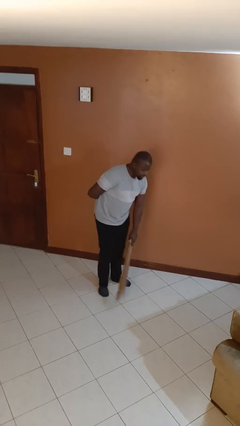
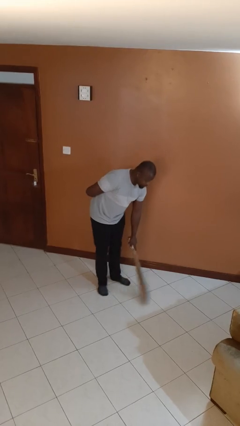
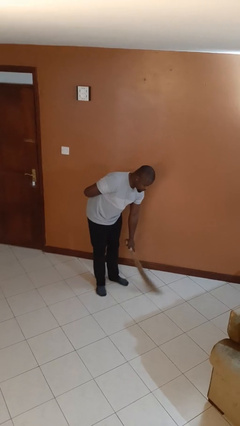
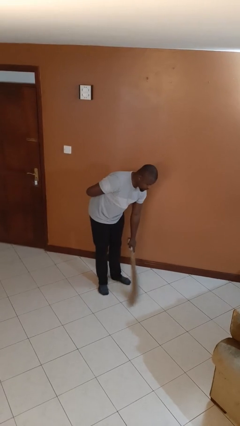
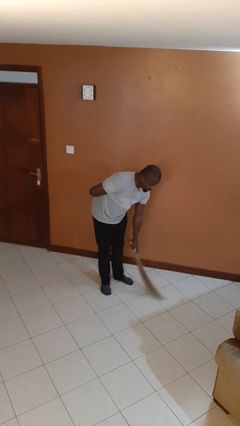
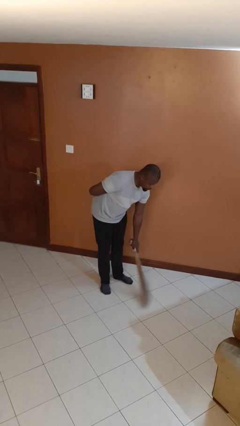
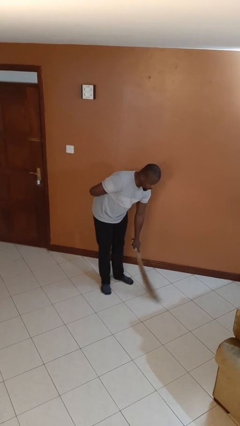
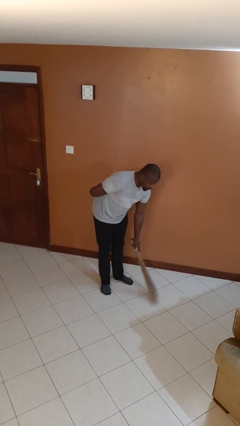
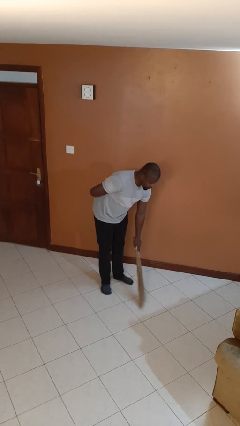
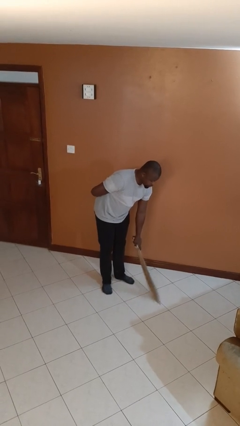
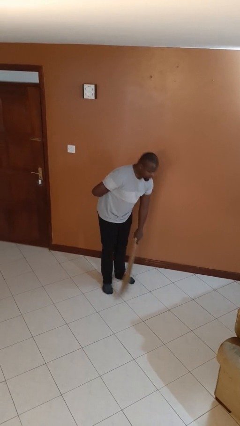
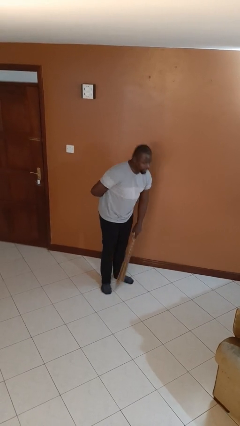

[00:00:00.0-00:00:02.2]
person sweeps floor

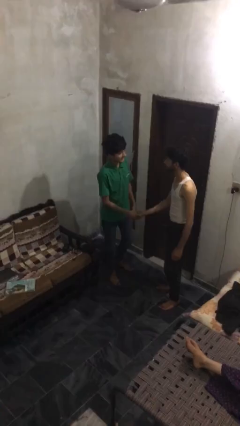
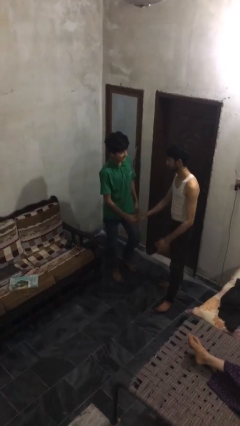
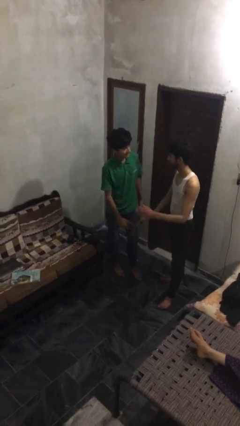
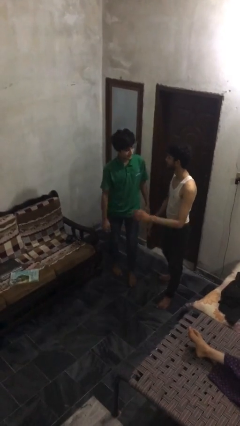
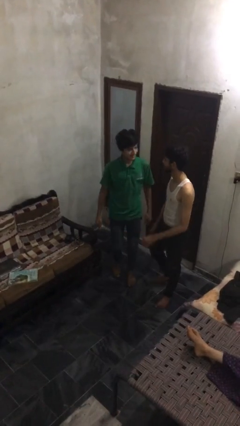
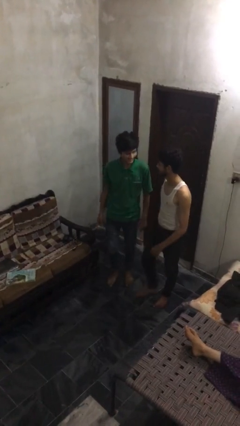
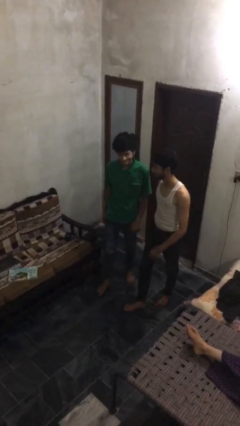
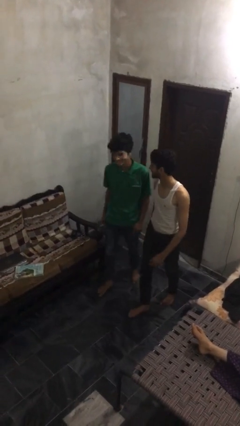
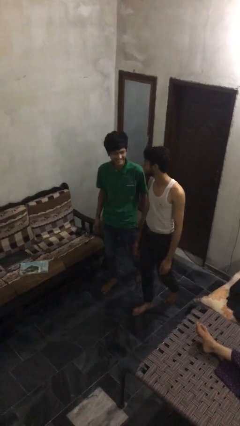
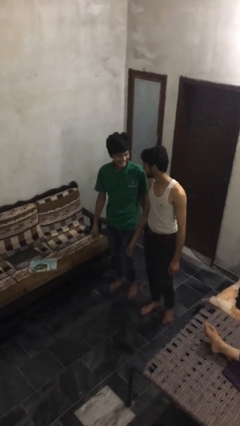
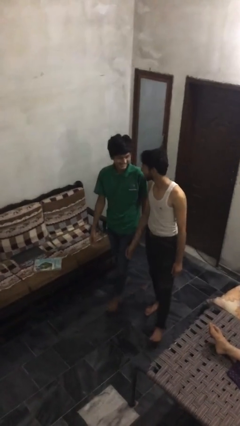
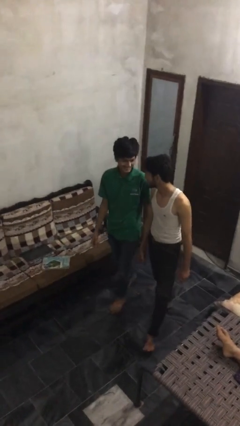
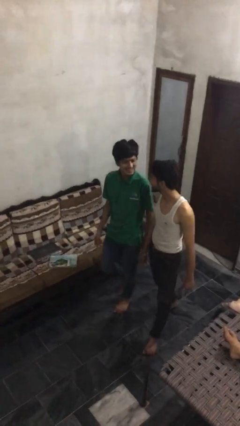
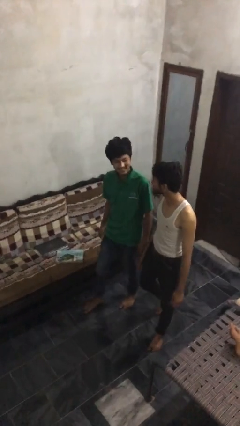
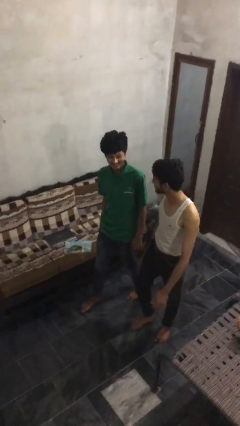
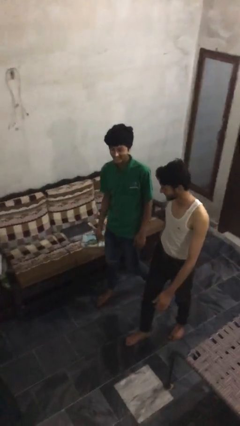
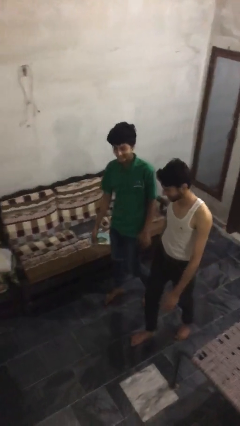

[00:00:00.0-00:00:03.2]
person talks to person

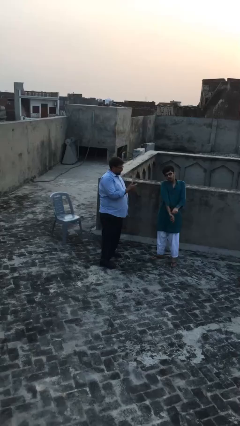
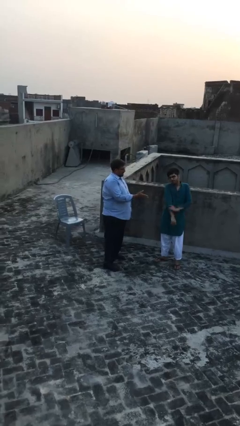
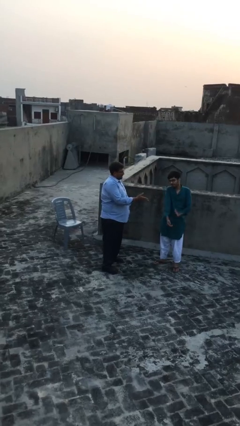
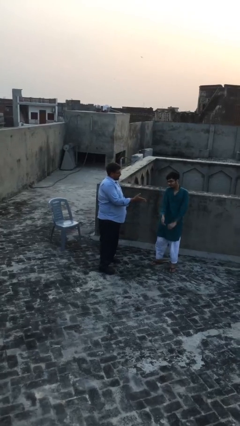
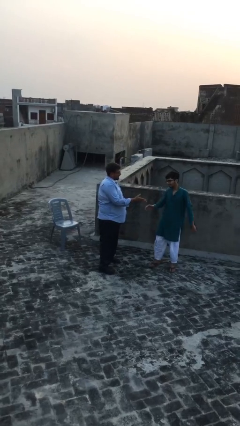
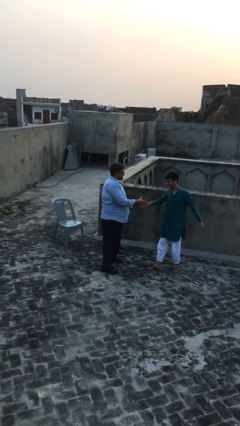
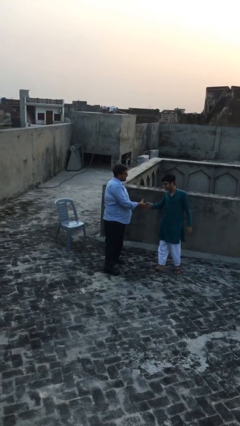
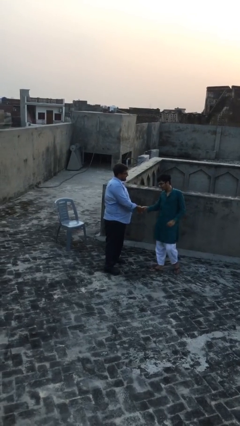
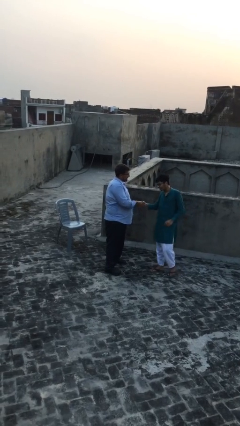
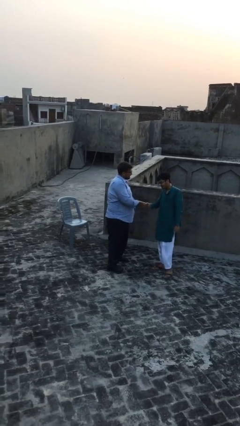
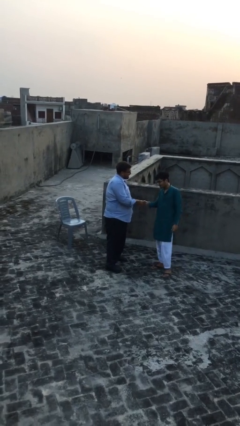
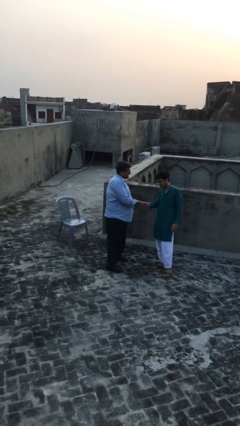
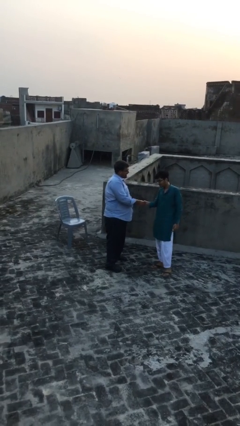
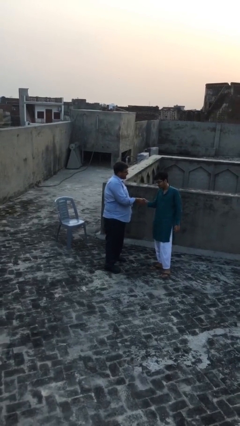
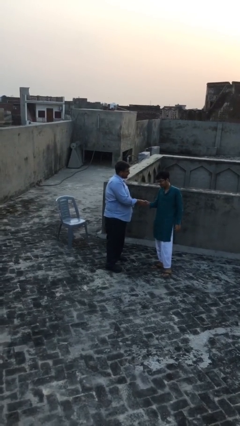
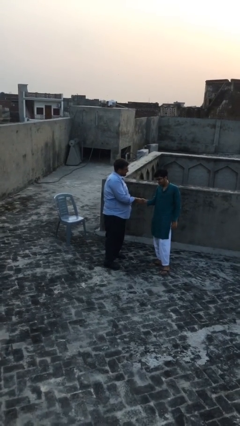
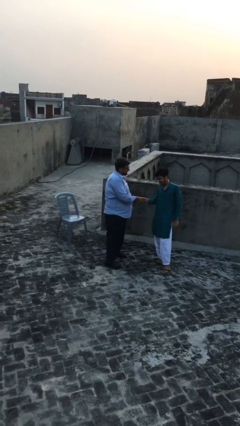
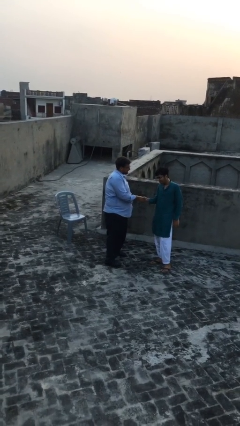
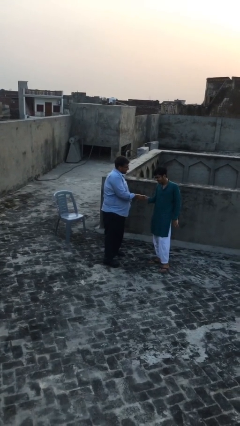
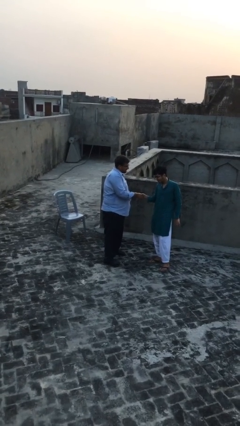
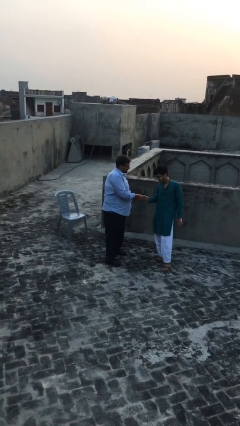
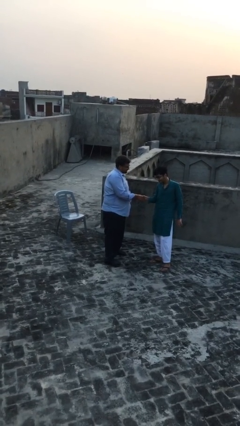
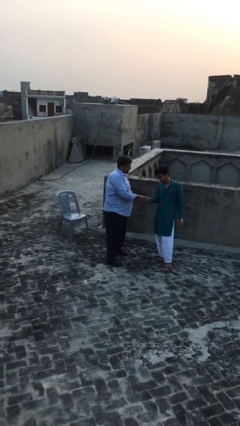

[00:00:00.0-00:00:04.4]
person shakes hand

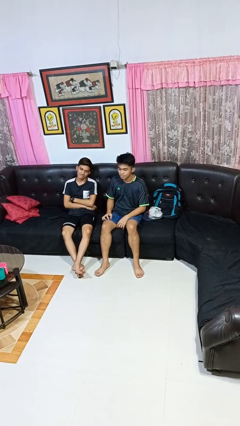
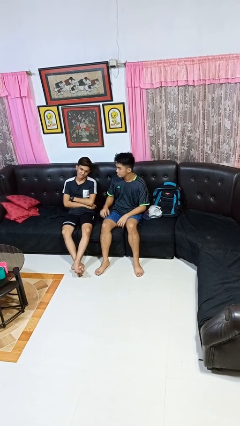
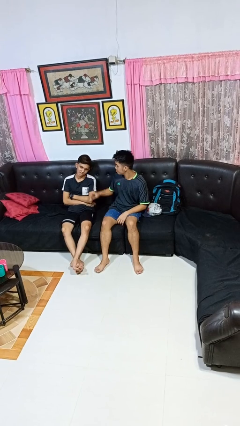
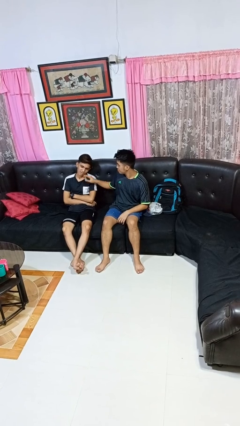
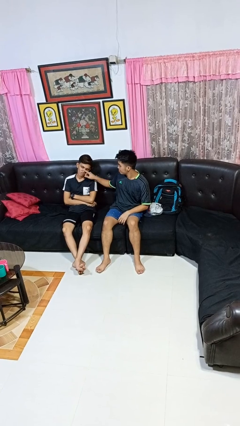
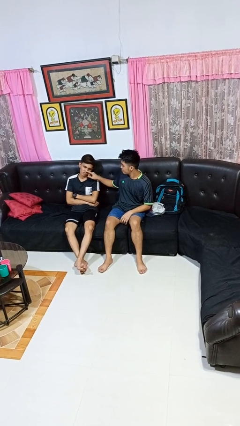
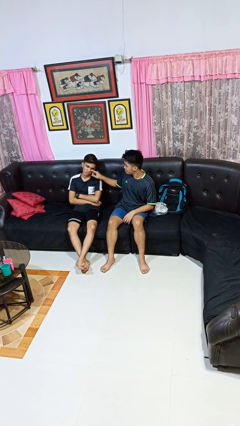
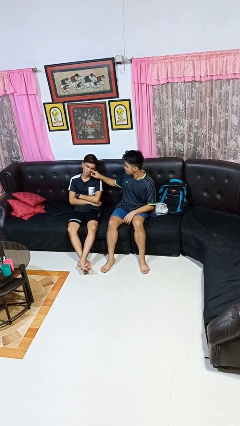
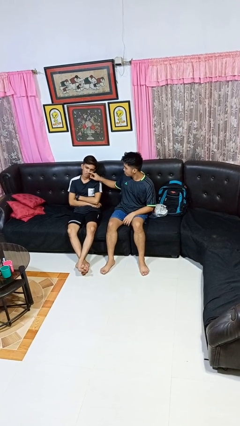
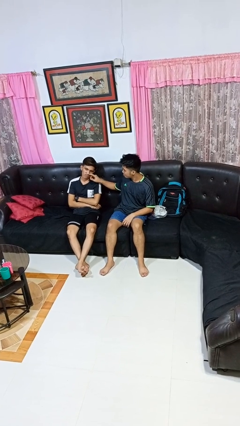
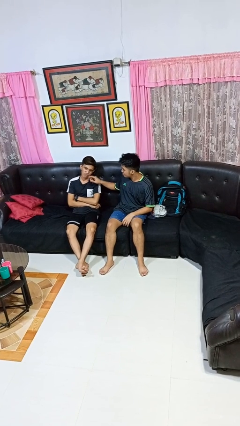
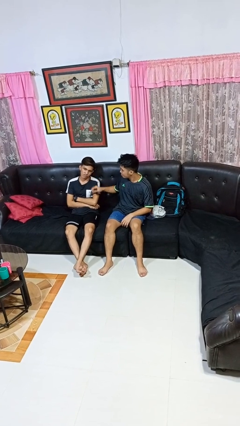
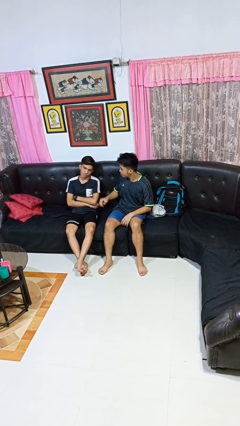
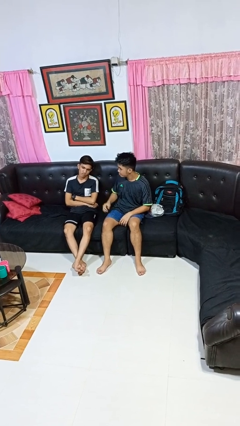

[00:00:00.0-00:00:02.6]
person touches face of person

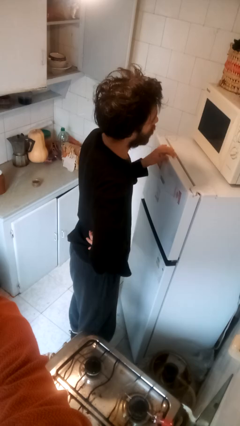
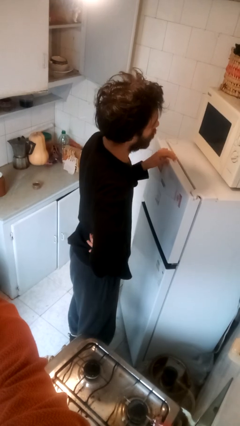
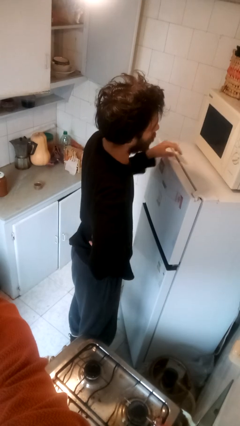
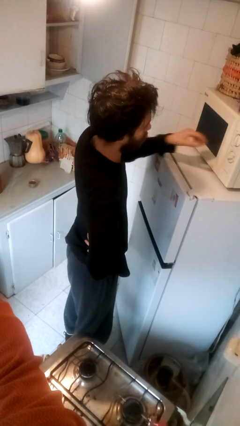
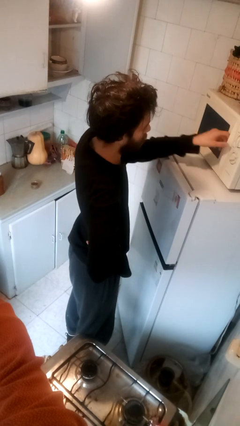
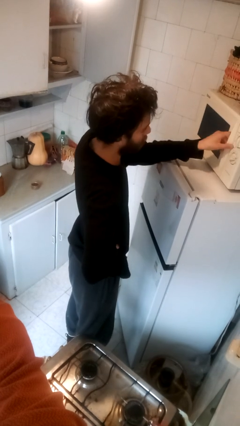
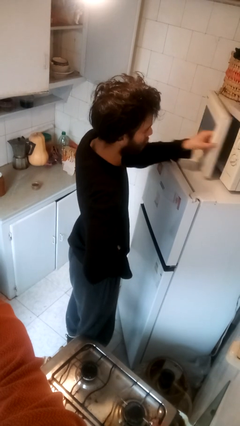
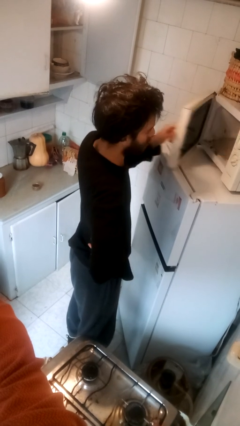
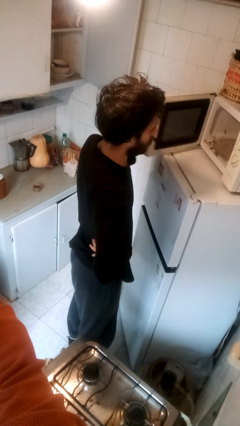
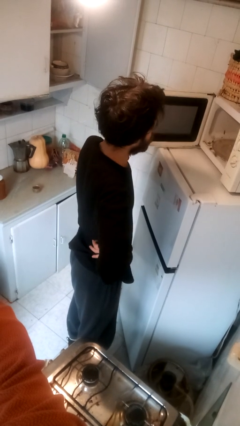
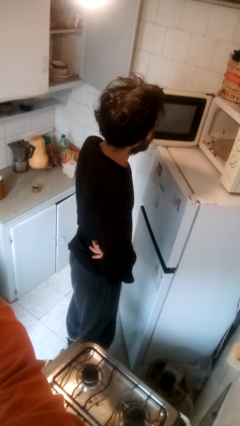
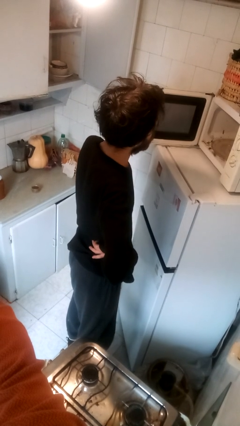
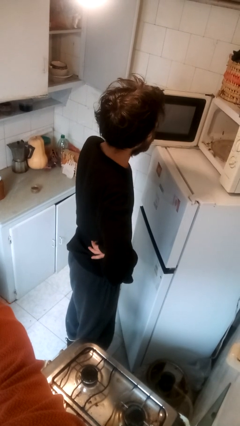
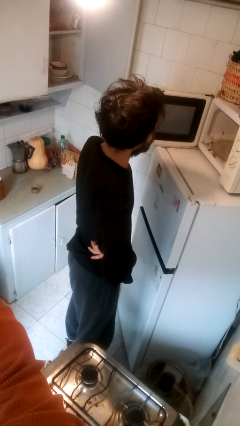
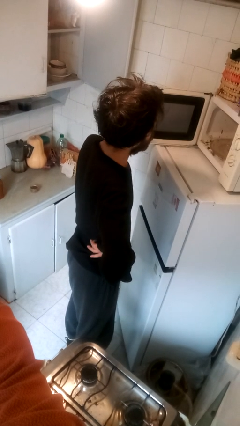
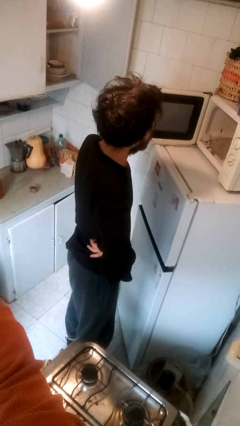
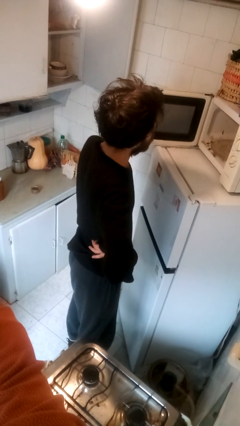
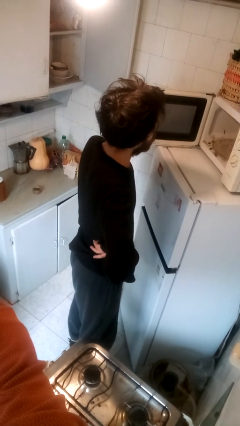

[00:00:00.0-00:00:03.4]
person opens microwave

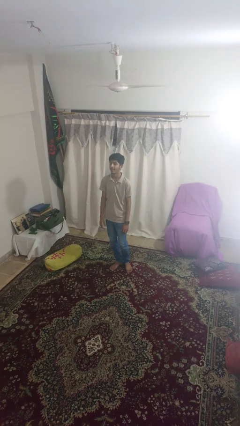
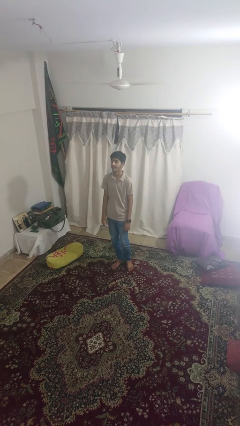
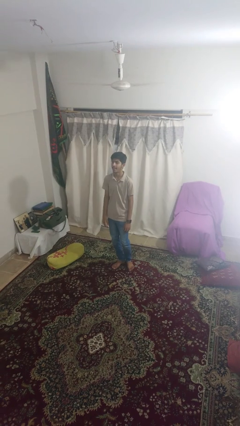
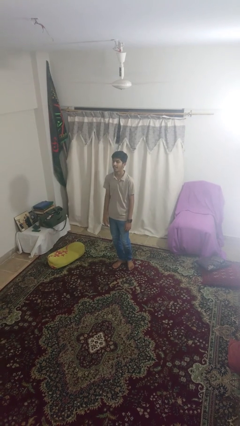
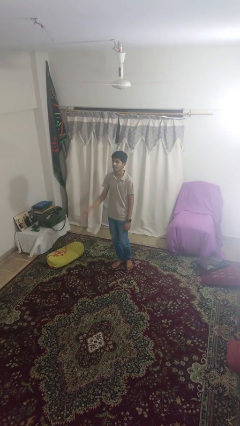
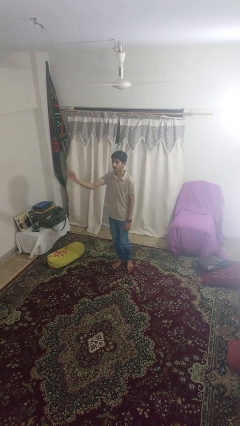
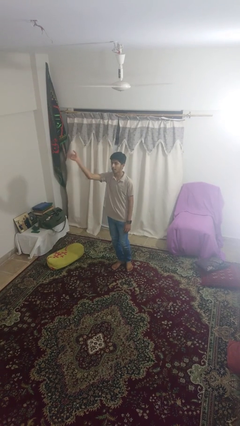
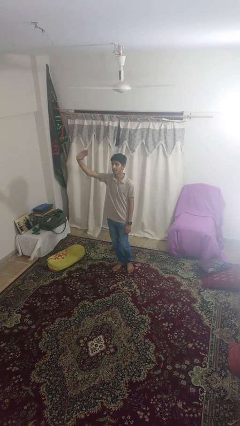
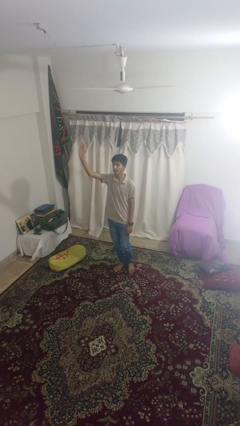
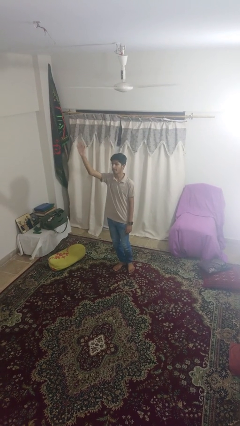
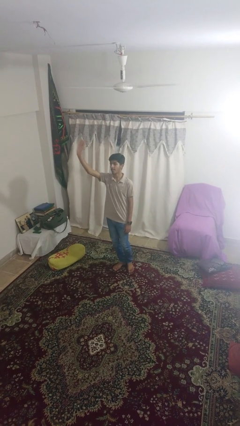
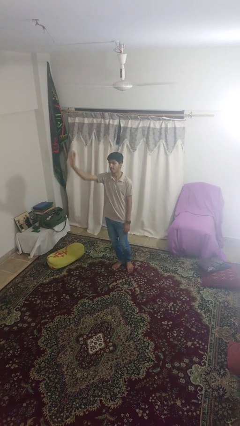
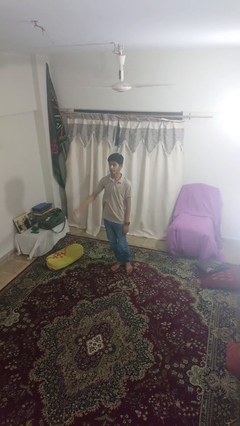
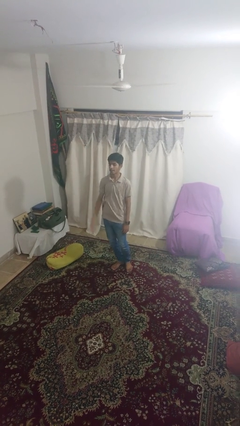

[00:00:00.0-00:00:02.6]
person waves at person
